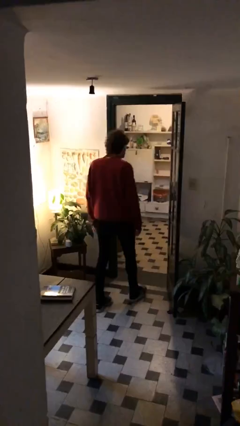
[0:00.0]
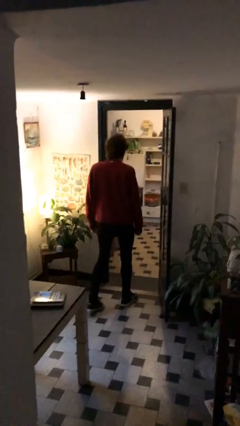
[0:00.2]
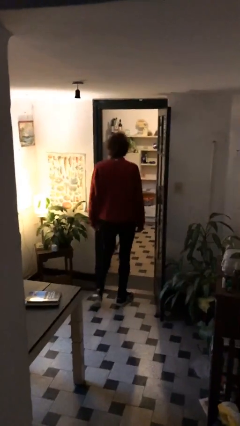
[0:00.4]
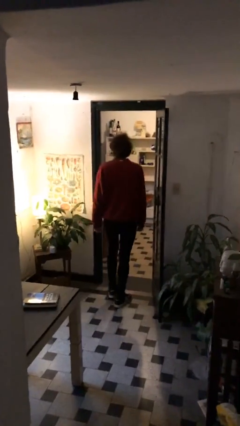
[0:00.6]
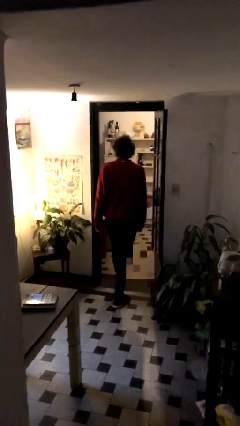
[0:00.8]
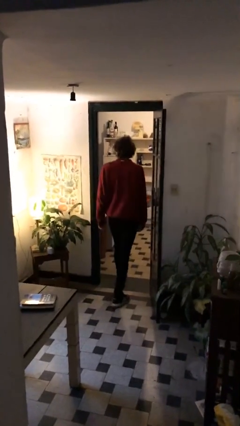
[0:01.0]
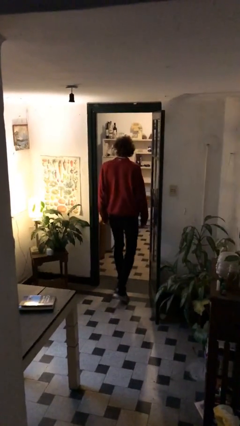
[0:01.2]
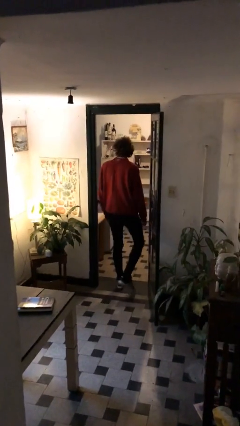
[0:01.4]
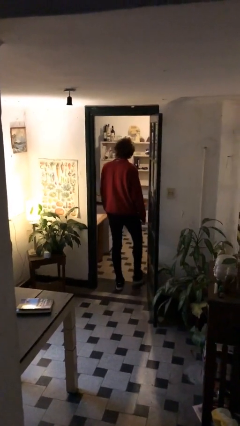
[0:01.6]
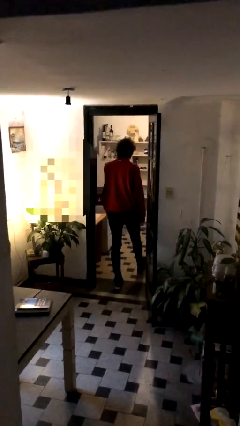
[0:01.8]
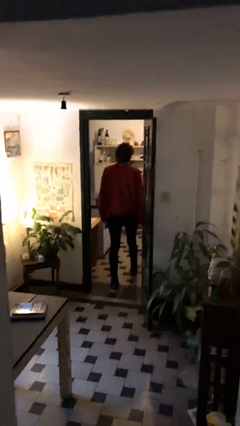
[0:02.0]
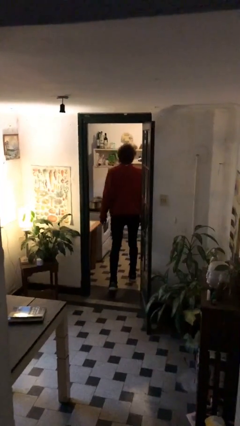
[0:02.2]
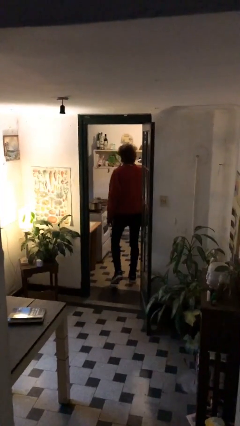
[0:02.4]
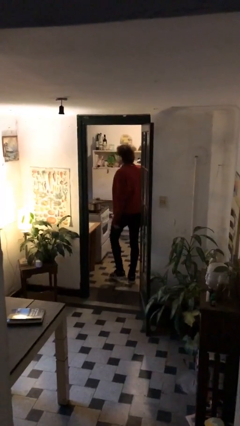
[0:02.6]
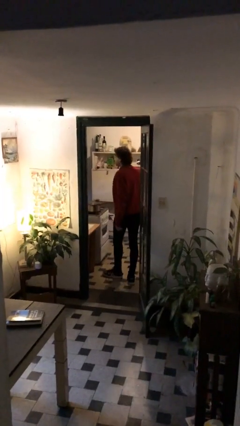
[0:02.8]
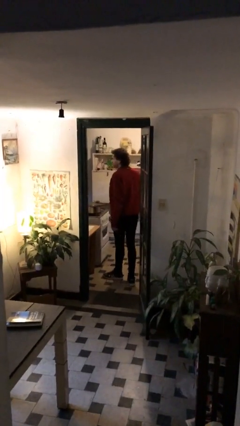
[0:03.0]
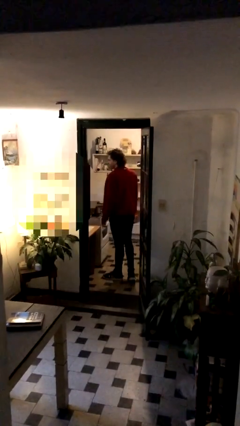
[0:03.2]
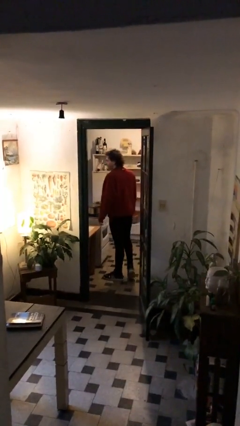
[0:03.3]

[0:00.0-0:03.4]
person exits scene through structure

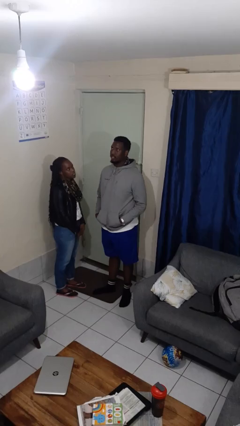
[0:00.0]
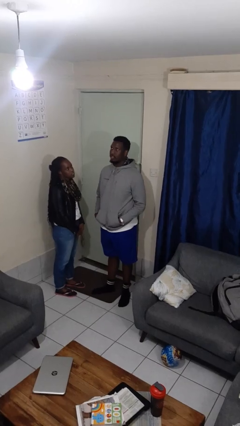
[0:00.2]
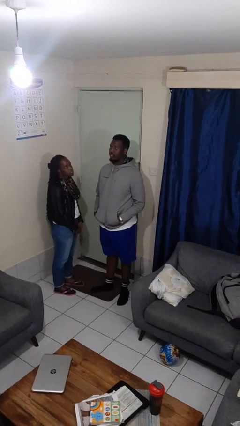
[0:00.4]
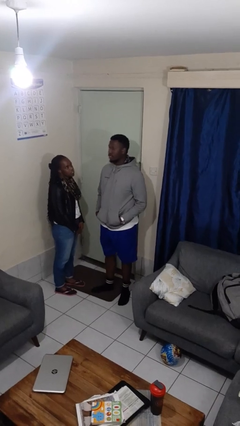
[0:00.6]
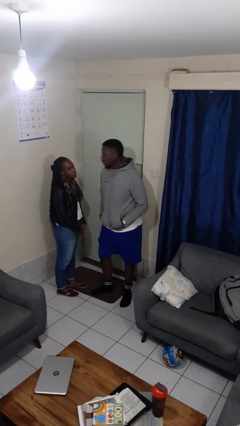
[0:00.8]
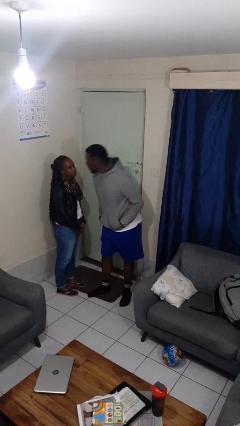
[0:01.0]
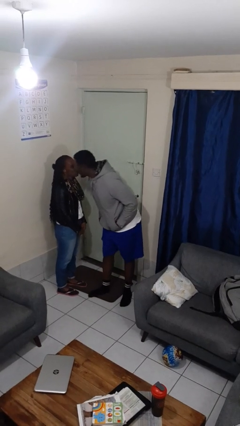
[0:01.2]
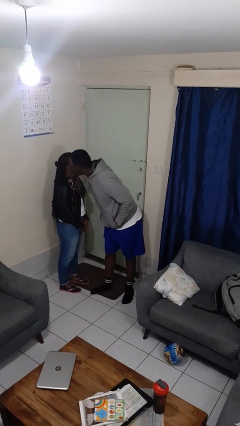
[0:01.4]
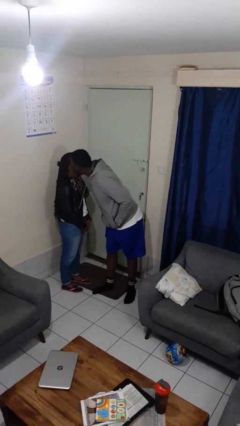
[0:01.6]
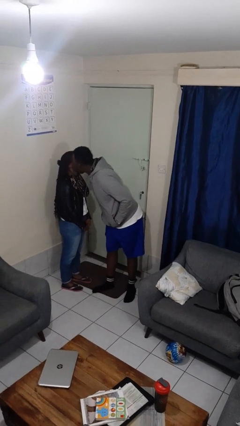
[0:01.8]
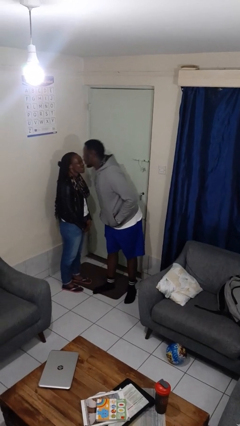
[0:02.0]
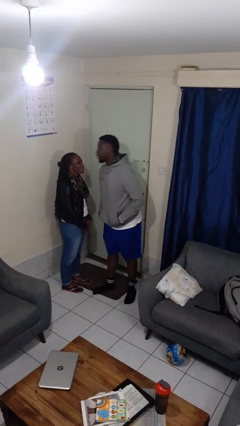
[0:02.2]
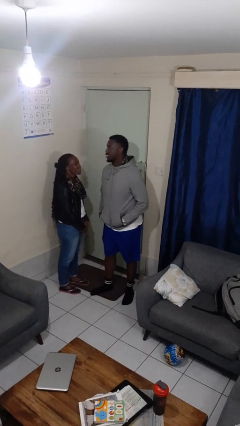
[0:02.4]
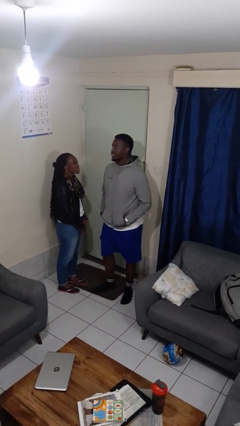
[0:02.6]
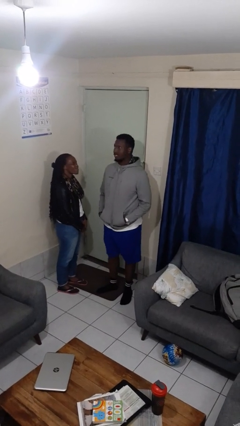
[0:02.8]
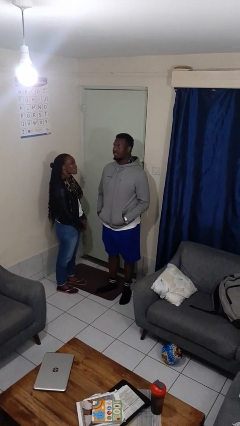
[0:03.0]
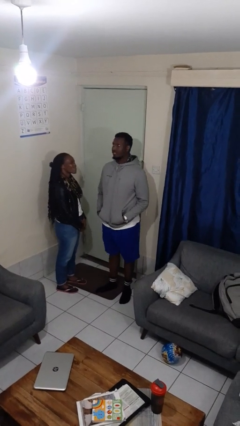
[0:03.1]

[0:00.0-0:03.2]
person kisses cheek of person

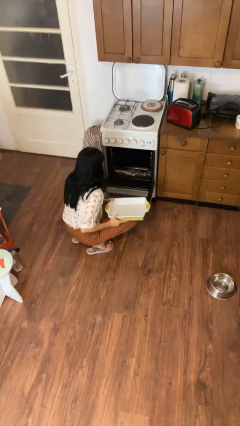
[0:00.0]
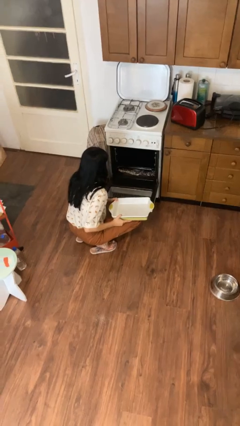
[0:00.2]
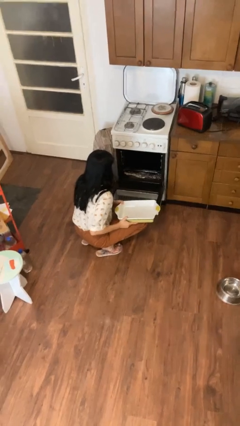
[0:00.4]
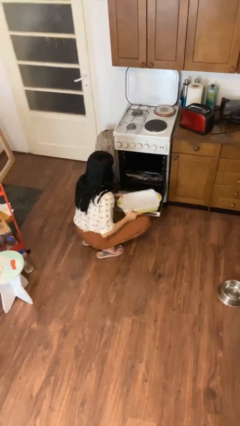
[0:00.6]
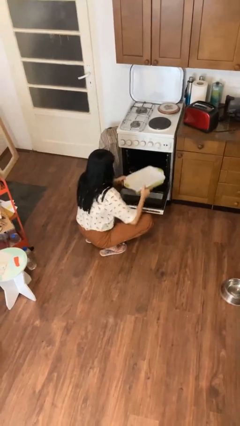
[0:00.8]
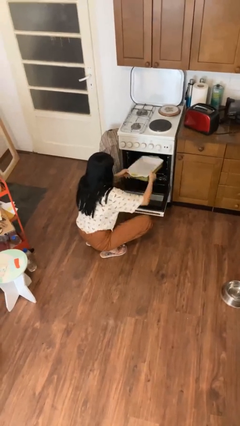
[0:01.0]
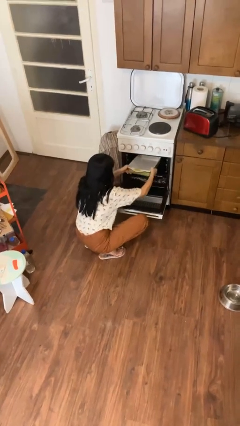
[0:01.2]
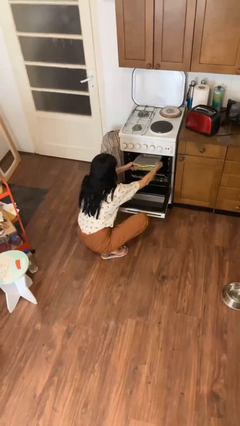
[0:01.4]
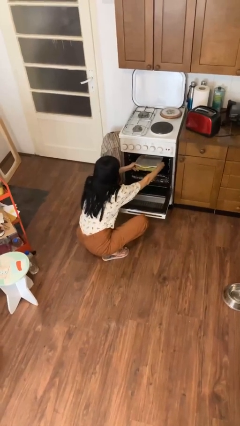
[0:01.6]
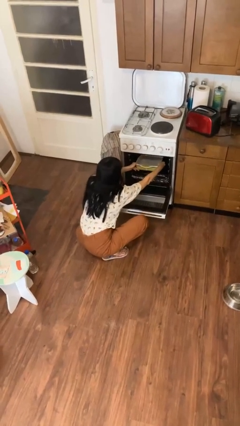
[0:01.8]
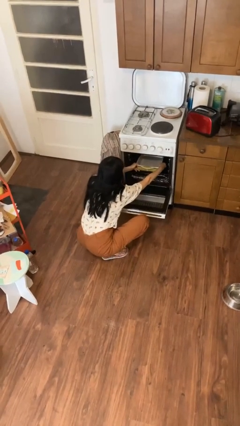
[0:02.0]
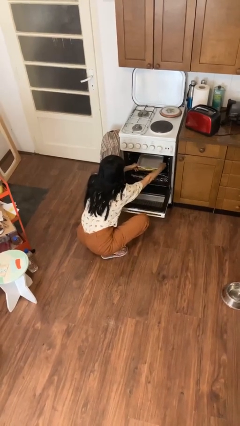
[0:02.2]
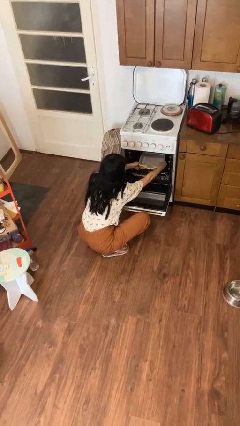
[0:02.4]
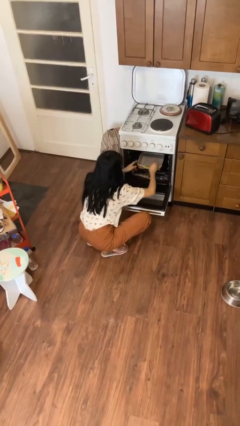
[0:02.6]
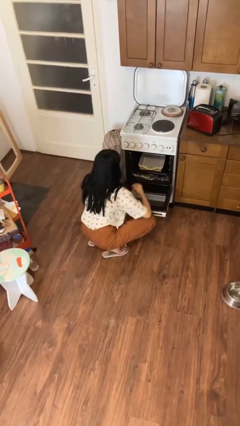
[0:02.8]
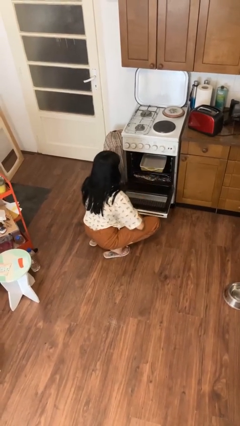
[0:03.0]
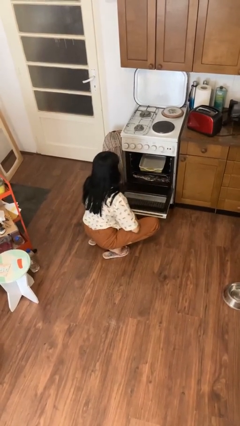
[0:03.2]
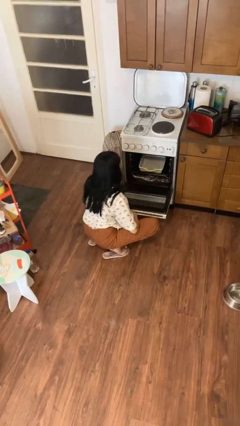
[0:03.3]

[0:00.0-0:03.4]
person puts object into oven

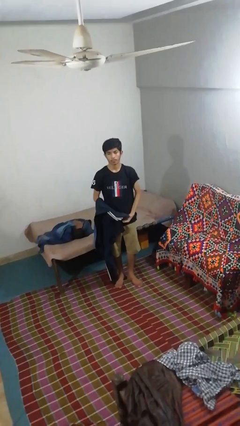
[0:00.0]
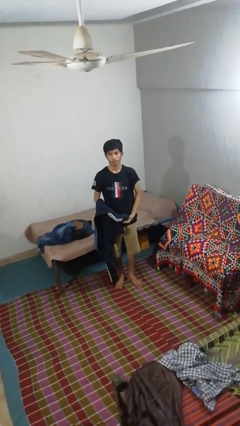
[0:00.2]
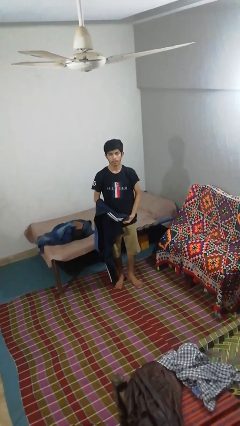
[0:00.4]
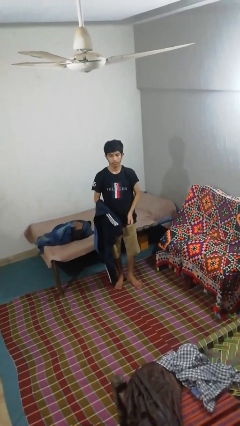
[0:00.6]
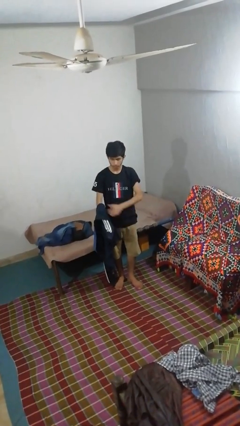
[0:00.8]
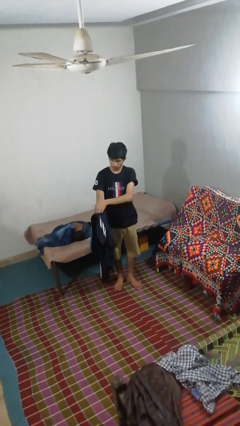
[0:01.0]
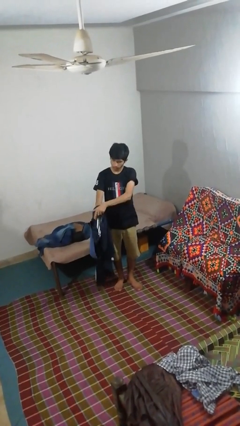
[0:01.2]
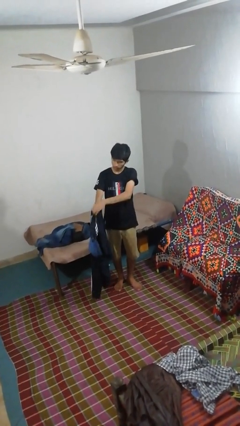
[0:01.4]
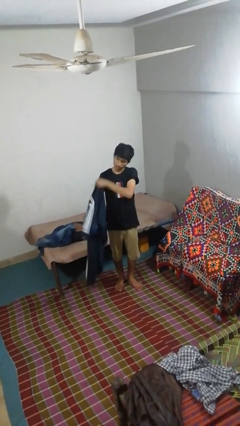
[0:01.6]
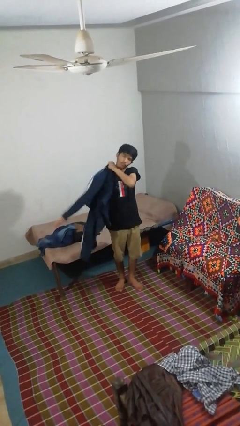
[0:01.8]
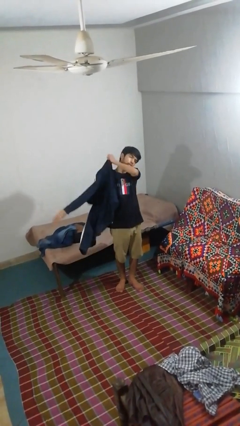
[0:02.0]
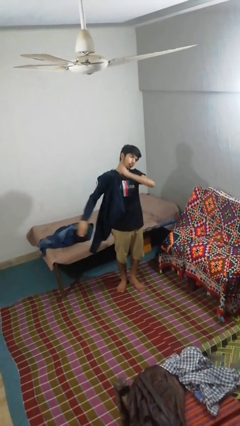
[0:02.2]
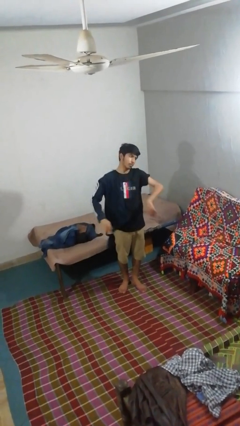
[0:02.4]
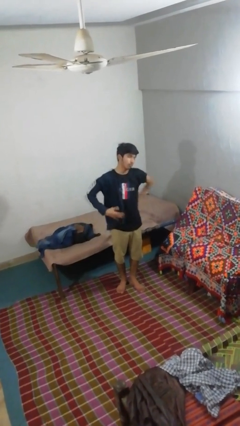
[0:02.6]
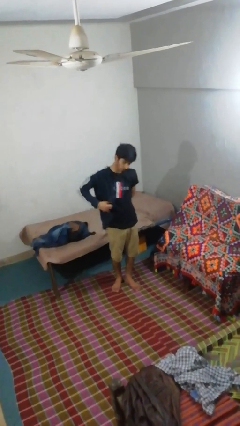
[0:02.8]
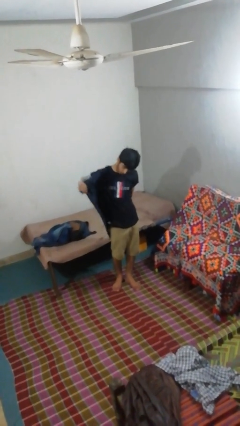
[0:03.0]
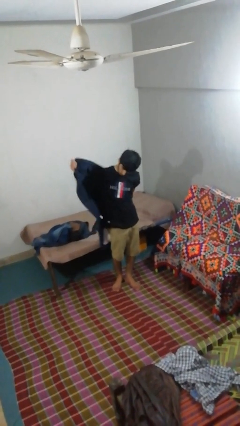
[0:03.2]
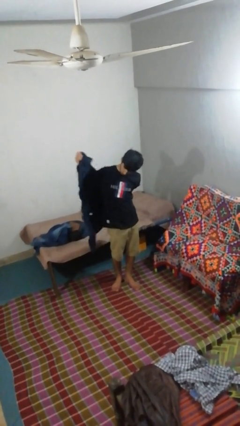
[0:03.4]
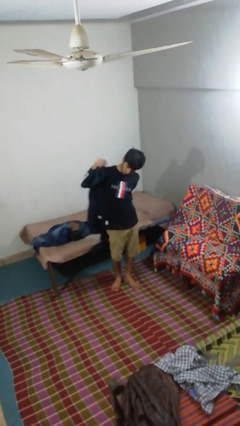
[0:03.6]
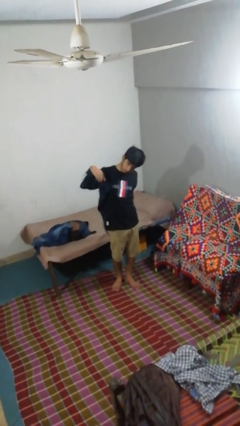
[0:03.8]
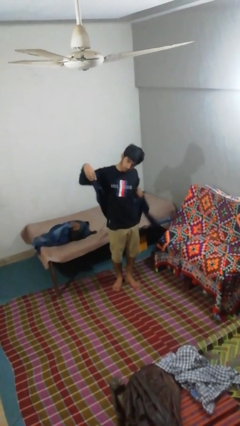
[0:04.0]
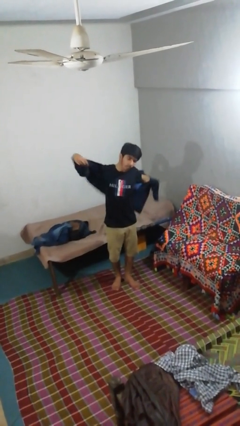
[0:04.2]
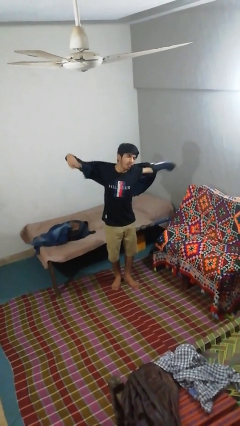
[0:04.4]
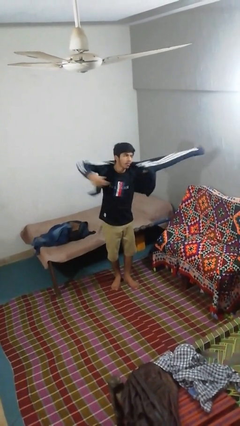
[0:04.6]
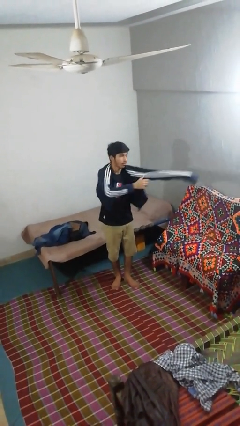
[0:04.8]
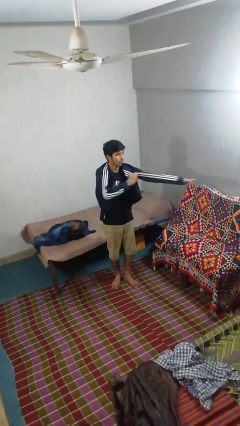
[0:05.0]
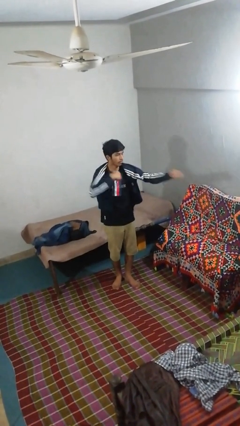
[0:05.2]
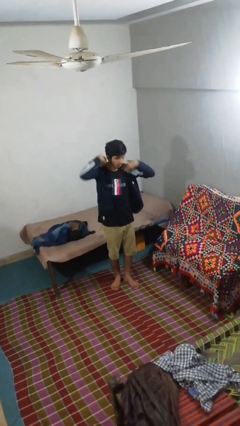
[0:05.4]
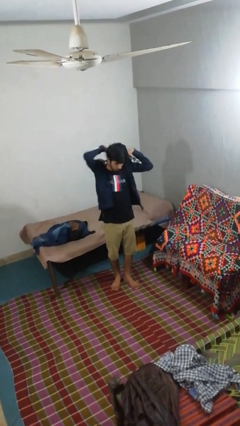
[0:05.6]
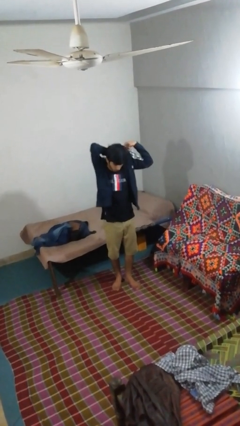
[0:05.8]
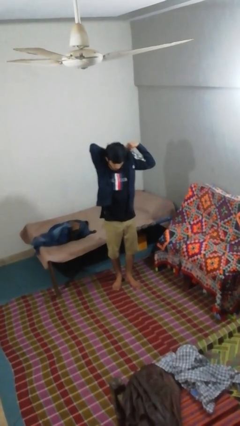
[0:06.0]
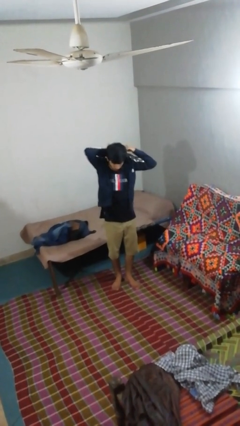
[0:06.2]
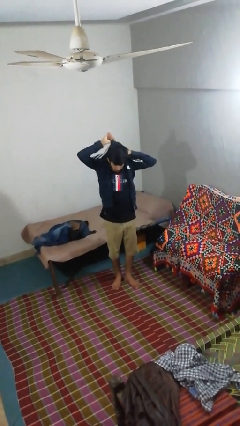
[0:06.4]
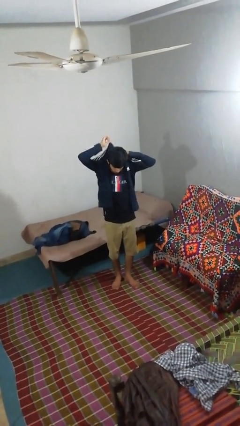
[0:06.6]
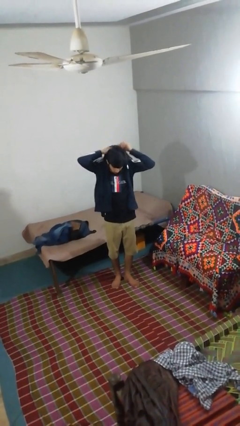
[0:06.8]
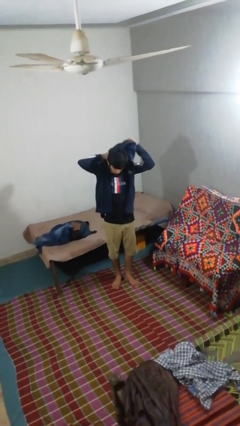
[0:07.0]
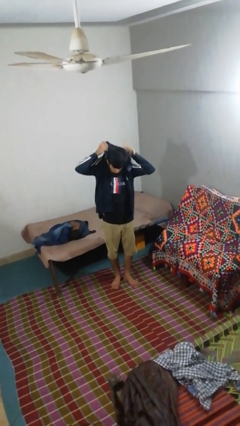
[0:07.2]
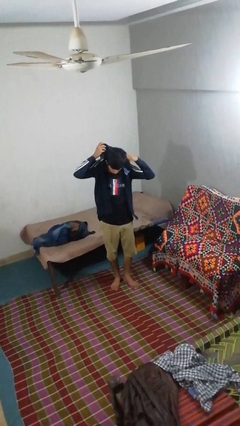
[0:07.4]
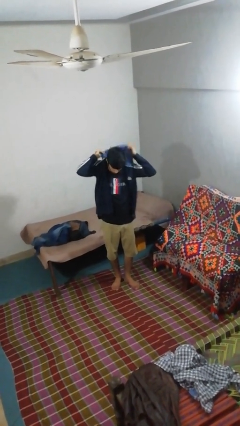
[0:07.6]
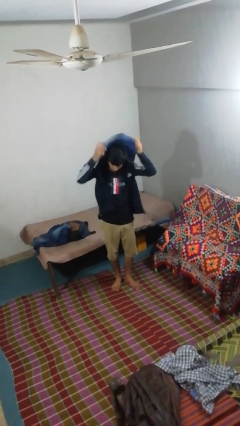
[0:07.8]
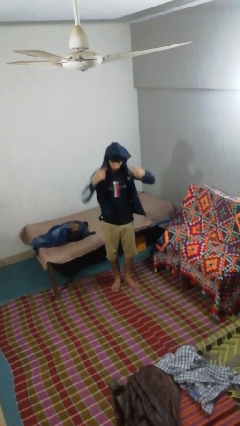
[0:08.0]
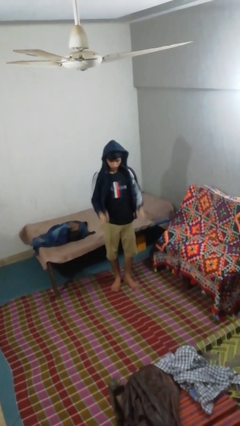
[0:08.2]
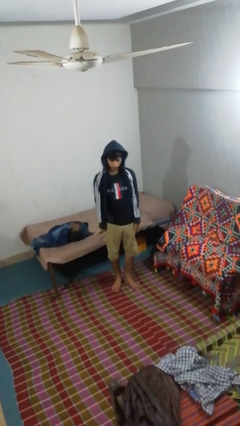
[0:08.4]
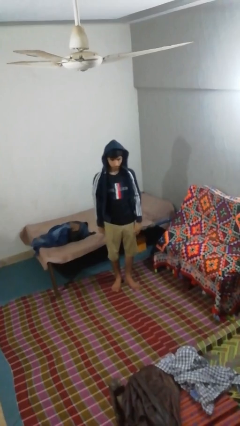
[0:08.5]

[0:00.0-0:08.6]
person puts on hoodie
